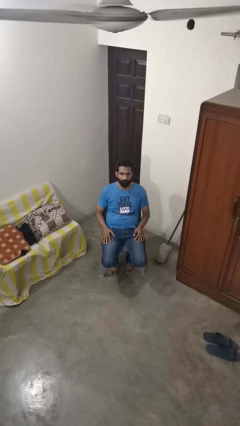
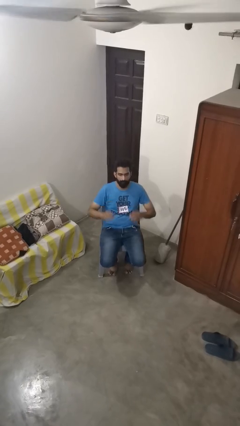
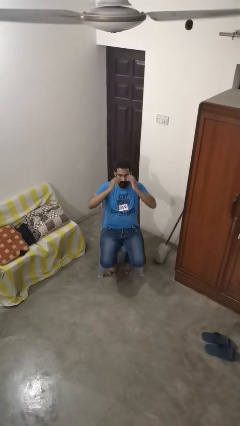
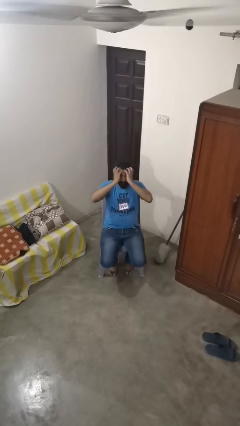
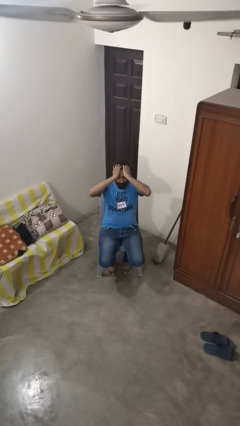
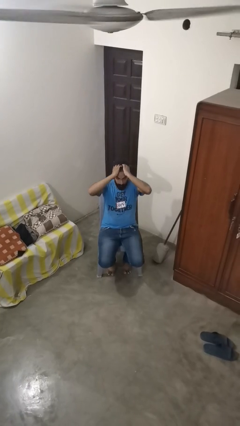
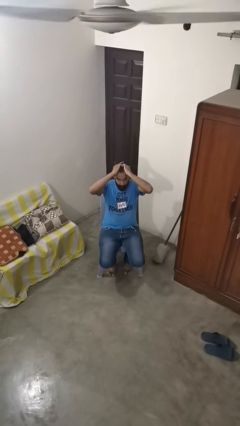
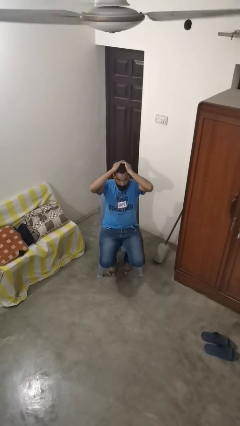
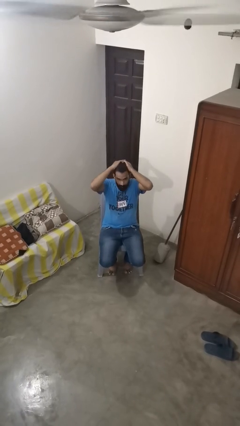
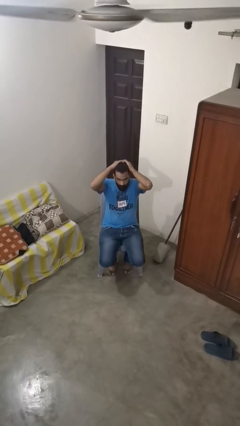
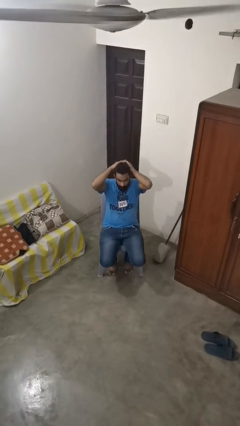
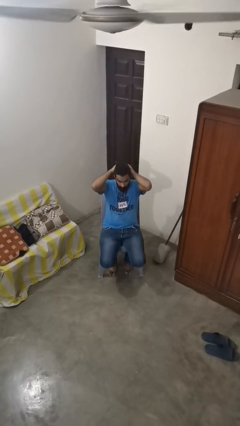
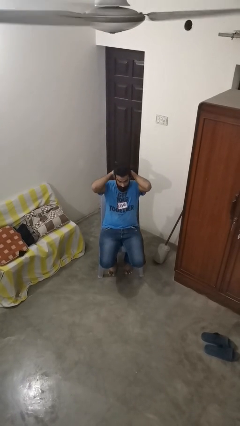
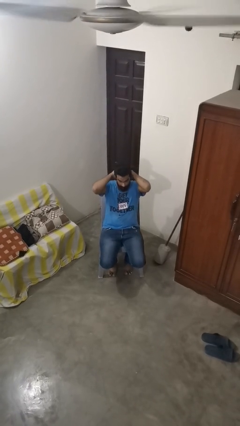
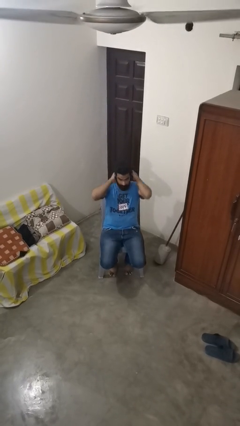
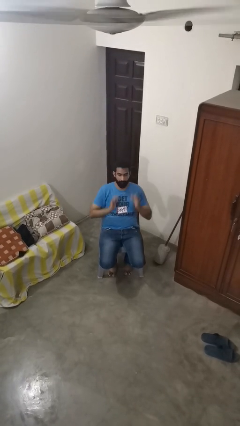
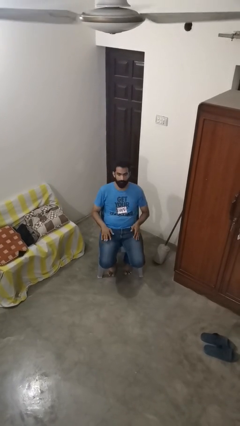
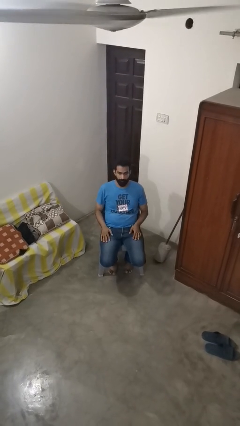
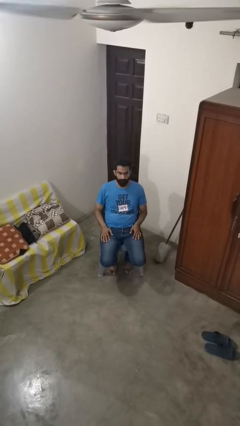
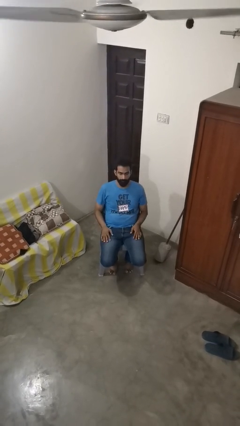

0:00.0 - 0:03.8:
person strokes hair

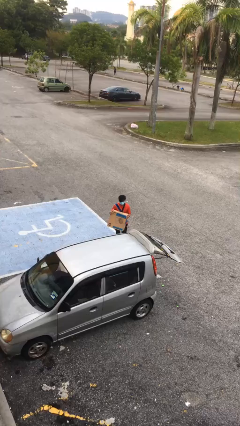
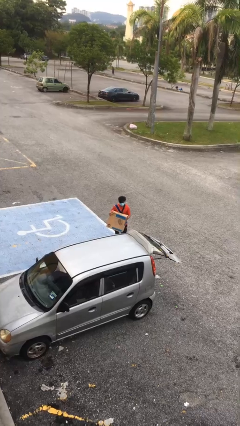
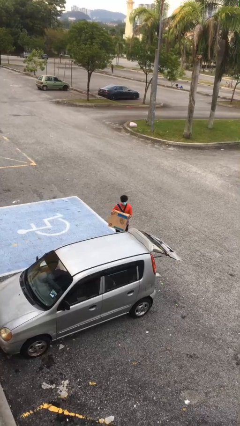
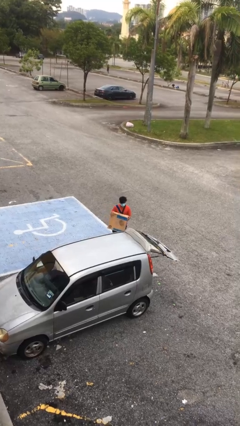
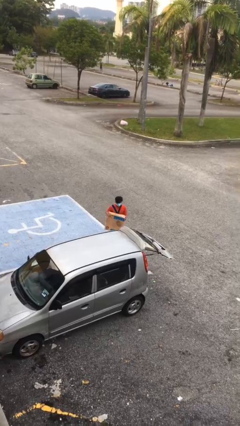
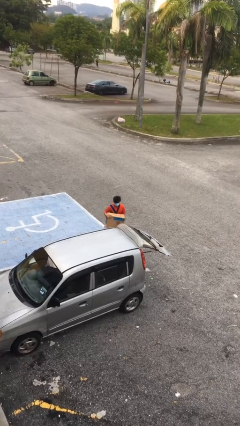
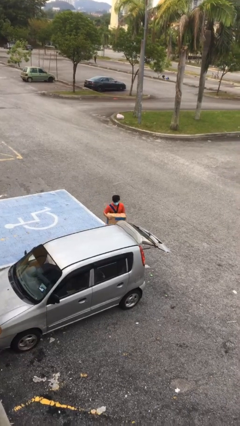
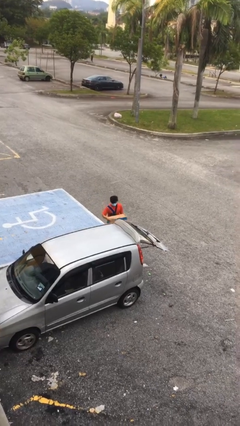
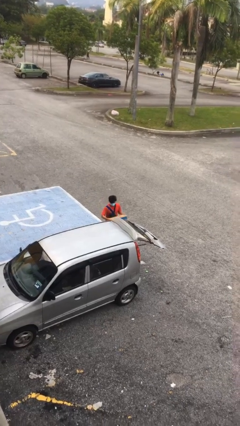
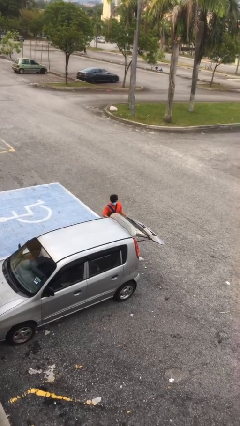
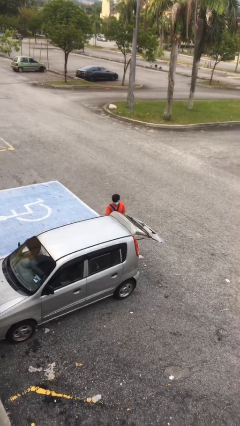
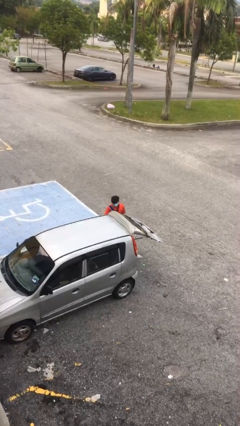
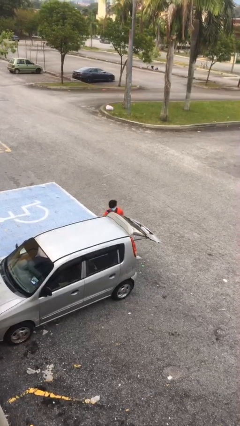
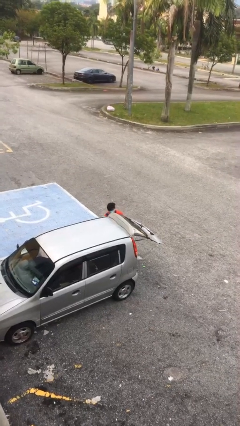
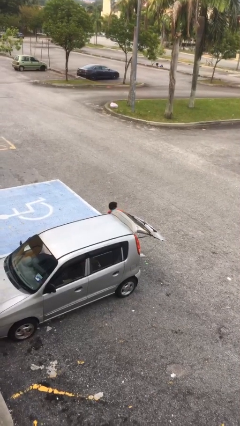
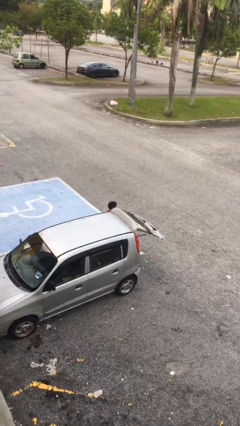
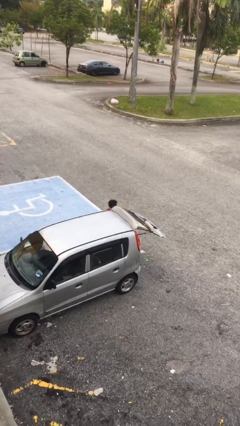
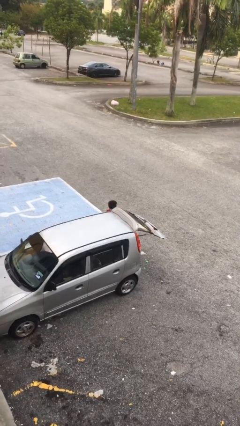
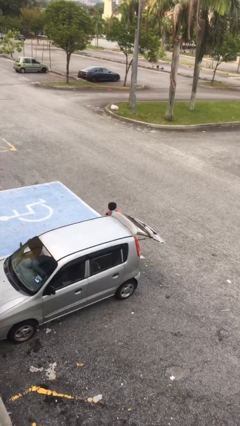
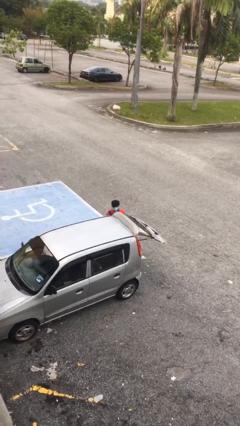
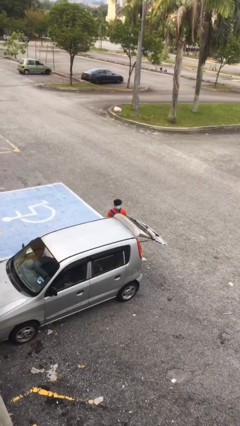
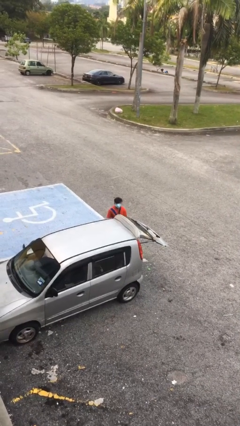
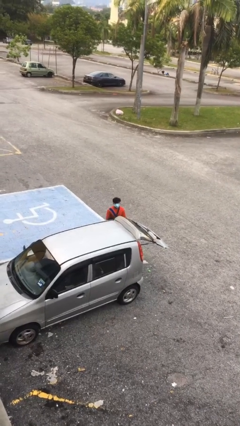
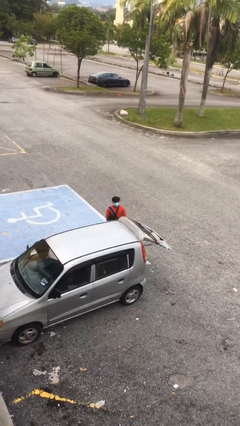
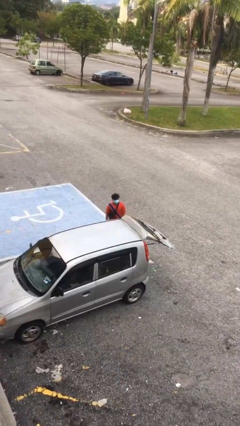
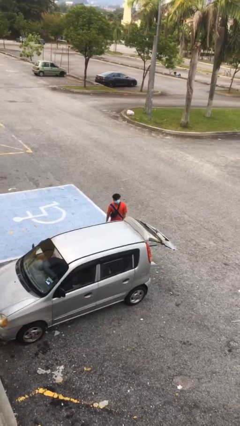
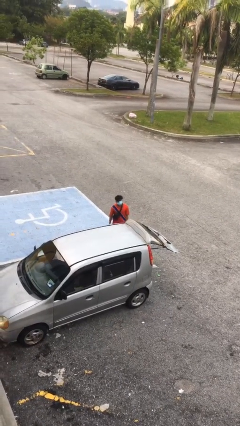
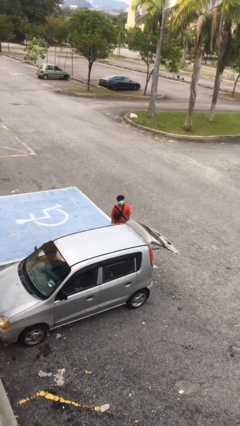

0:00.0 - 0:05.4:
person loads car

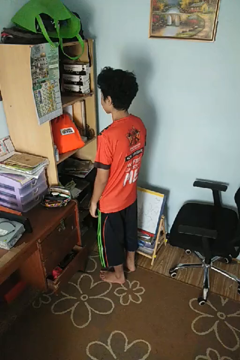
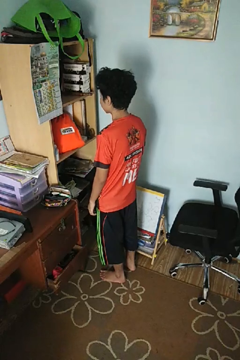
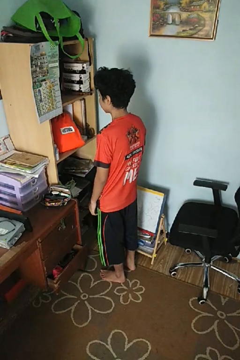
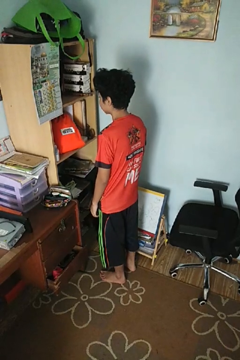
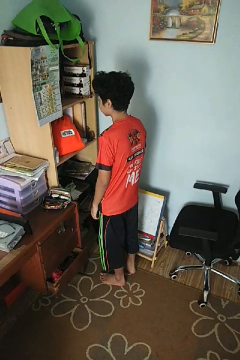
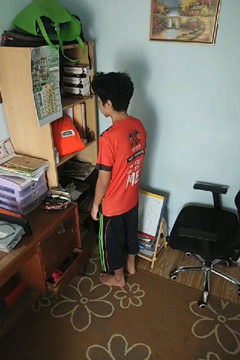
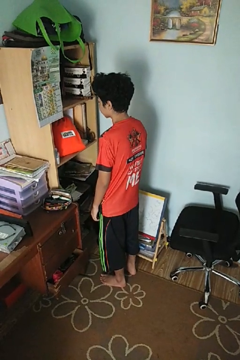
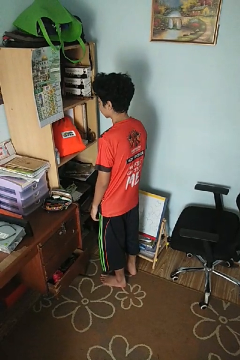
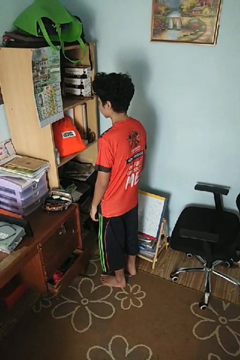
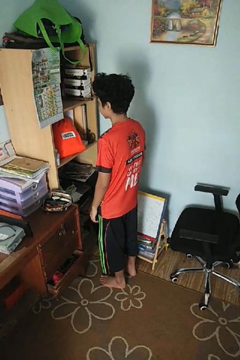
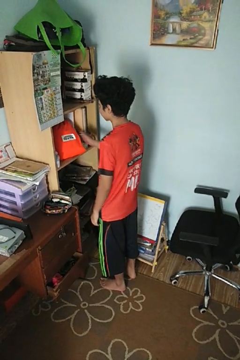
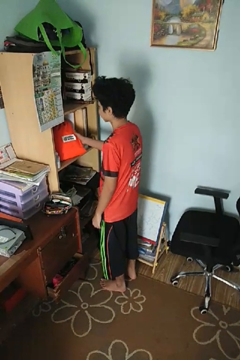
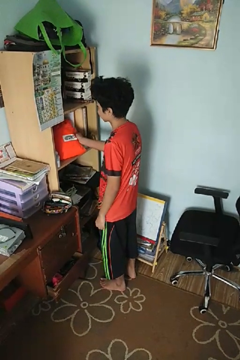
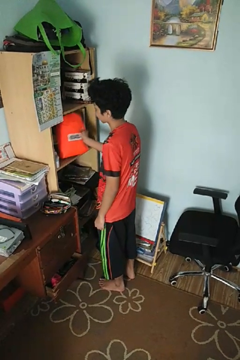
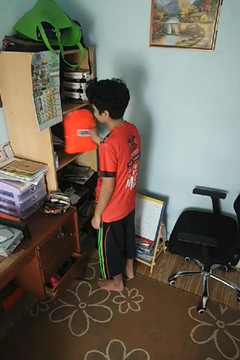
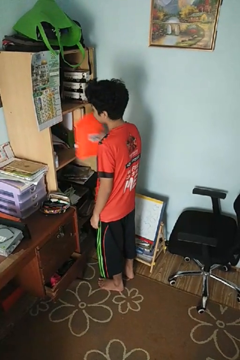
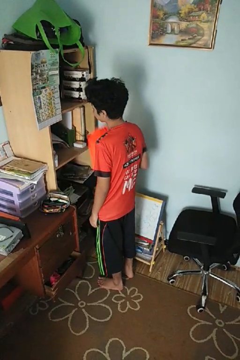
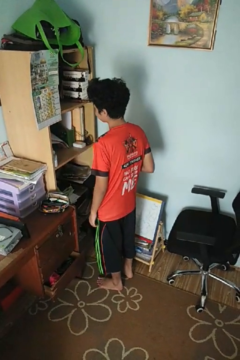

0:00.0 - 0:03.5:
person picks up object from cabinet

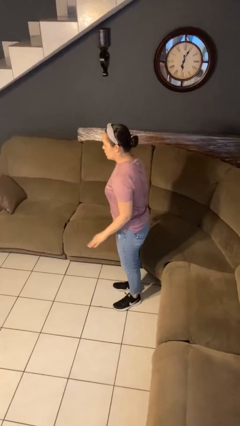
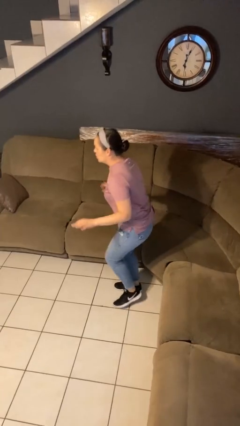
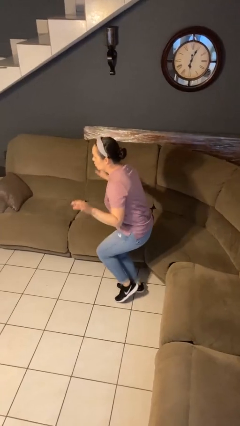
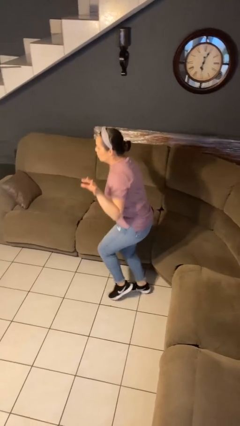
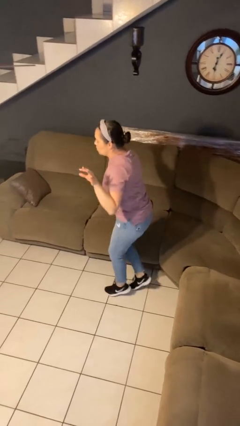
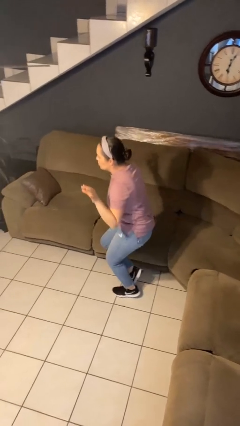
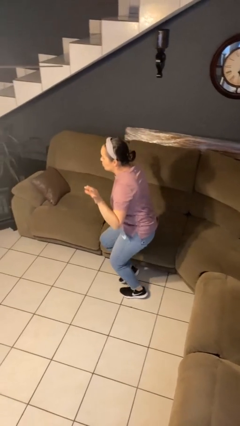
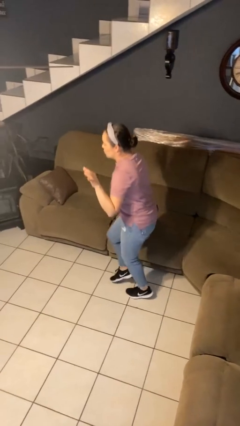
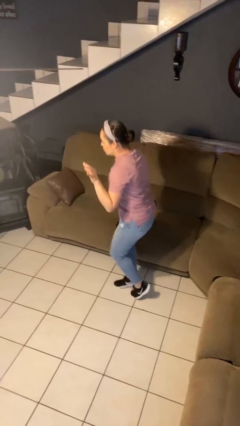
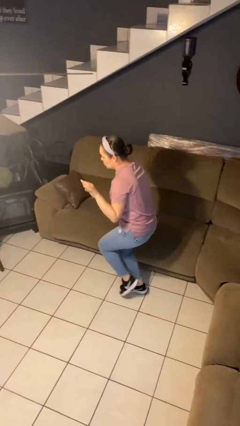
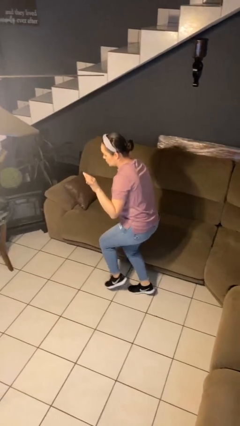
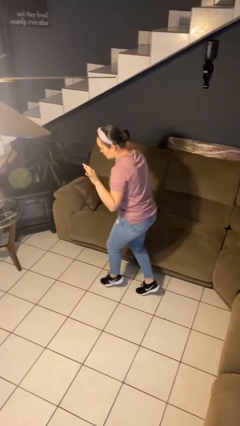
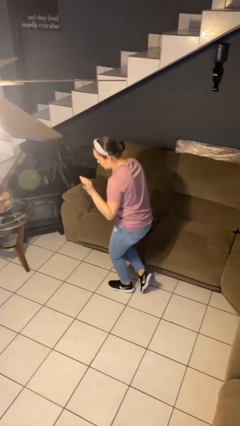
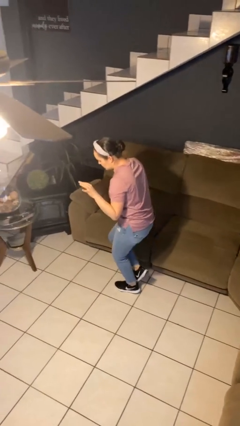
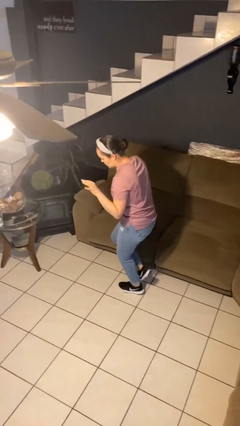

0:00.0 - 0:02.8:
person walks tiptoe

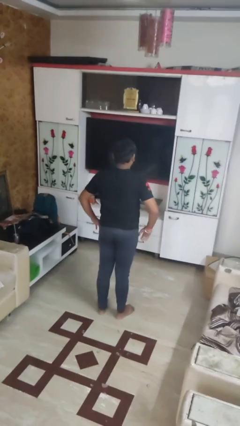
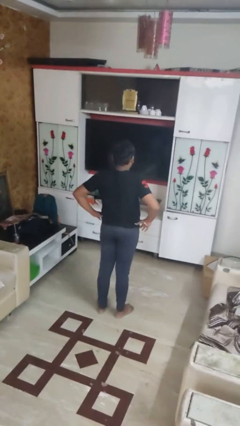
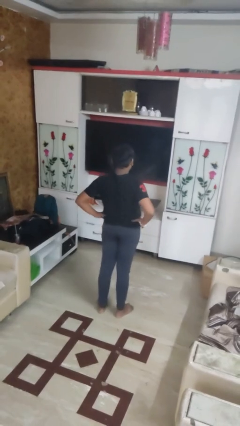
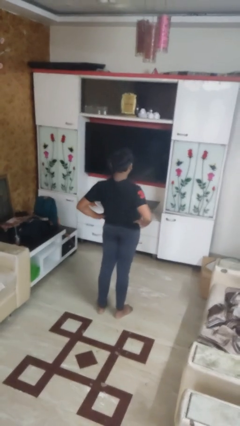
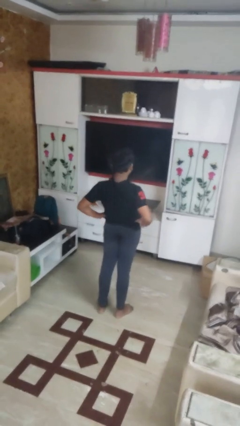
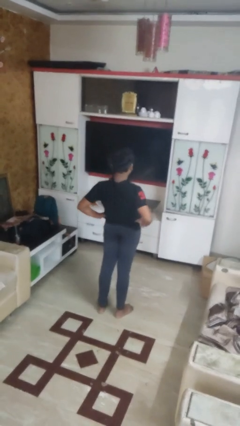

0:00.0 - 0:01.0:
person stretches back

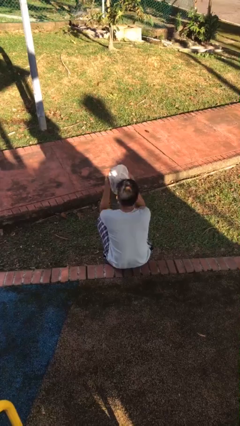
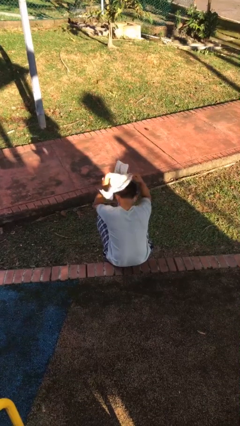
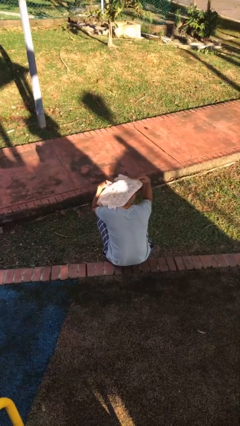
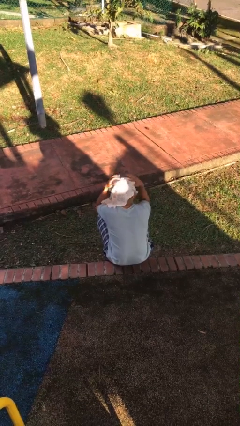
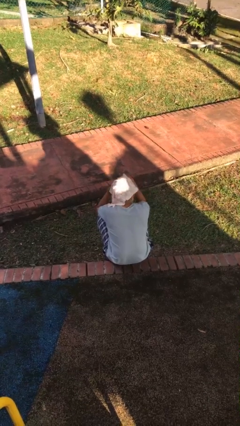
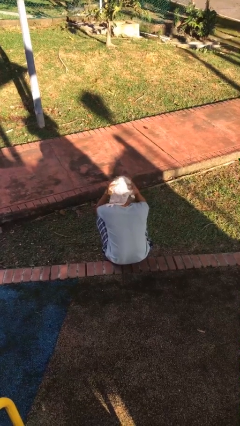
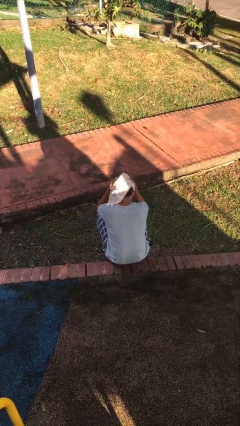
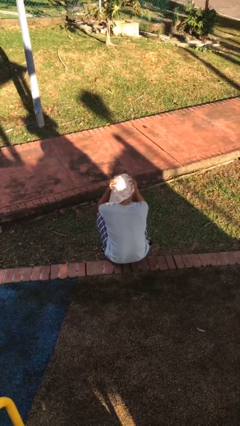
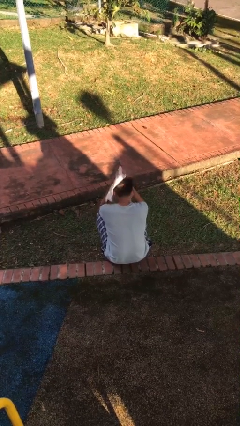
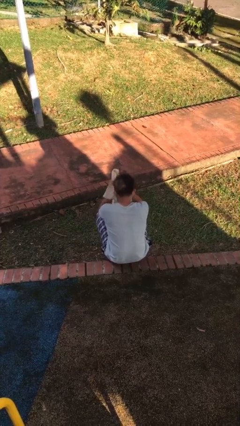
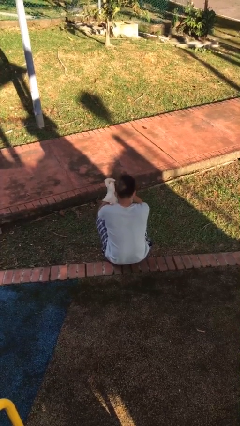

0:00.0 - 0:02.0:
person dries hair with towel
